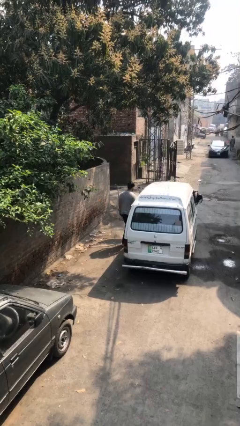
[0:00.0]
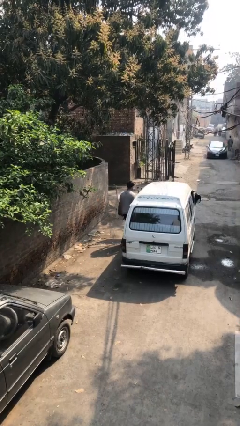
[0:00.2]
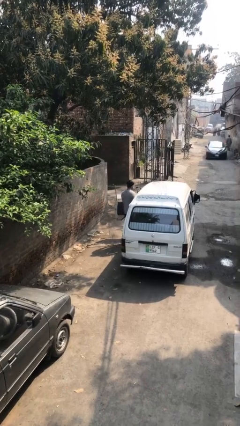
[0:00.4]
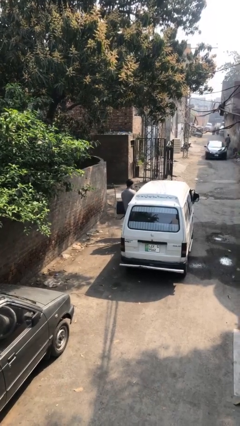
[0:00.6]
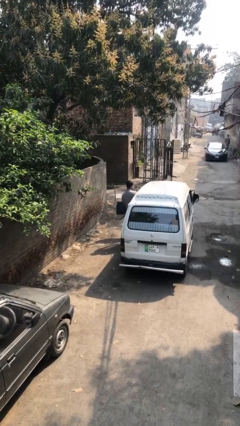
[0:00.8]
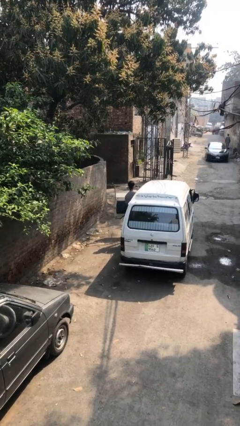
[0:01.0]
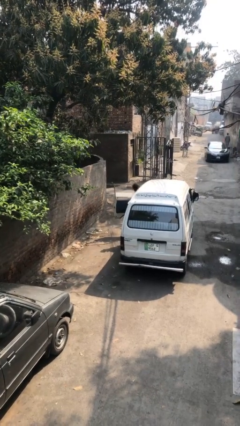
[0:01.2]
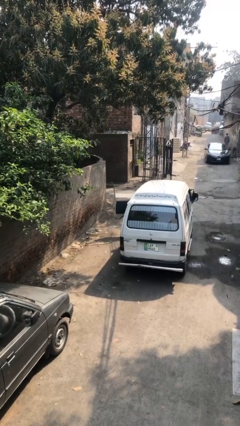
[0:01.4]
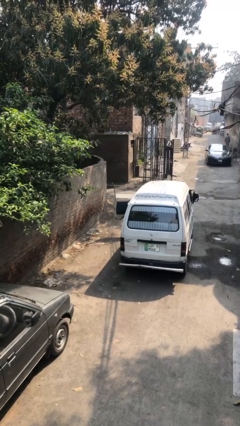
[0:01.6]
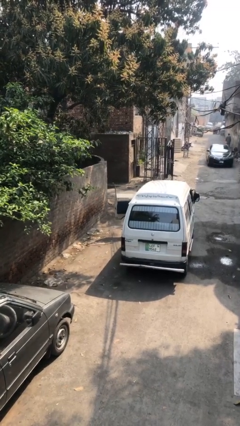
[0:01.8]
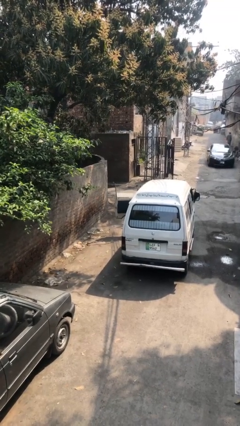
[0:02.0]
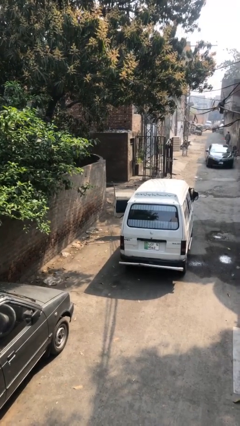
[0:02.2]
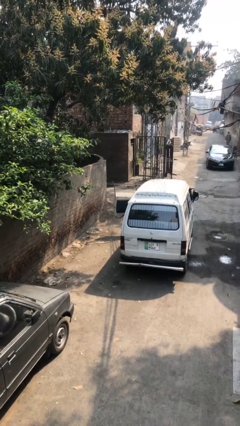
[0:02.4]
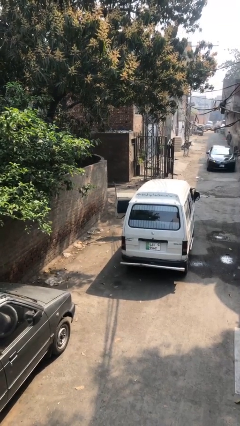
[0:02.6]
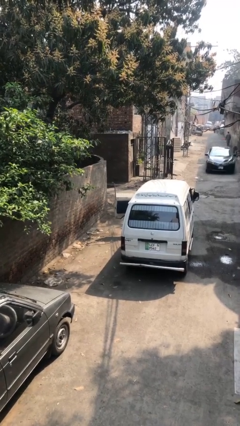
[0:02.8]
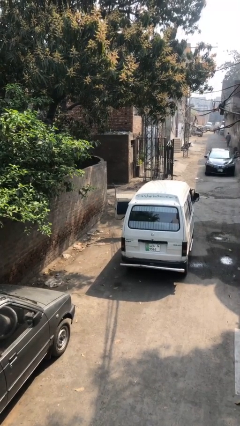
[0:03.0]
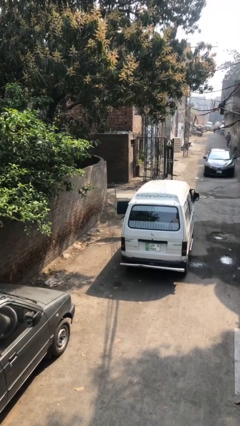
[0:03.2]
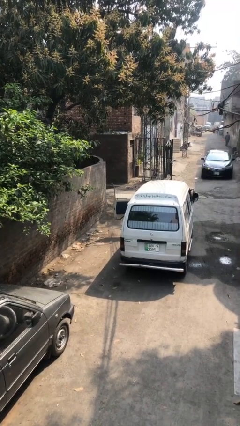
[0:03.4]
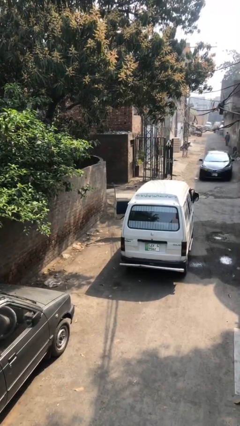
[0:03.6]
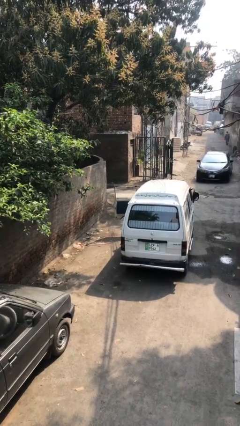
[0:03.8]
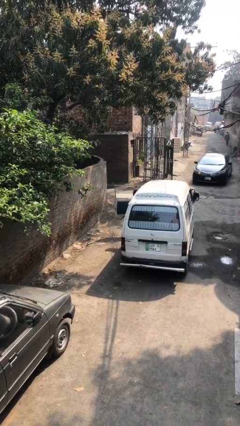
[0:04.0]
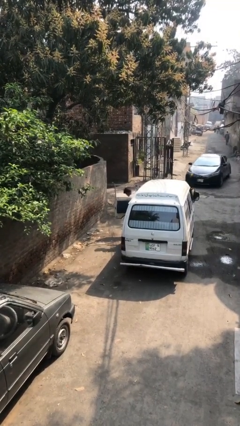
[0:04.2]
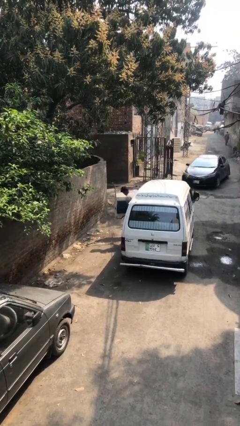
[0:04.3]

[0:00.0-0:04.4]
person enters car

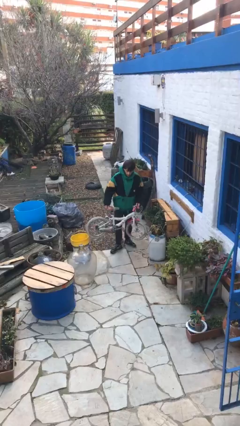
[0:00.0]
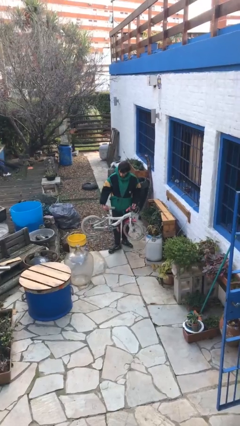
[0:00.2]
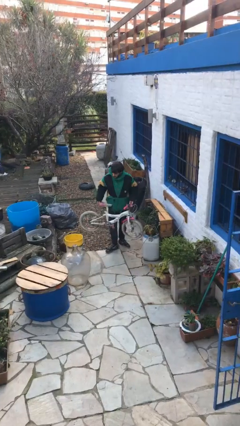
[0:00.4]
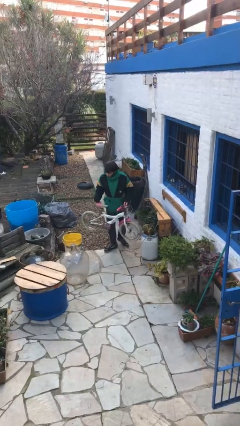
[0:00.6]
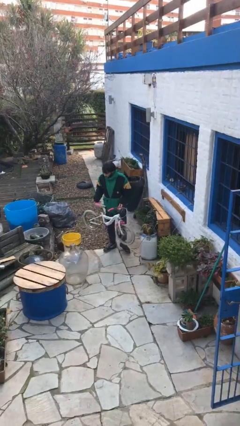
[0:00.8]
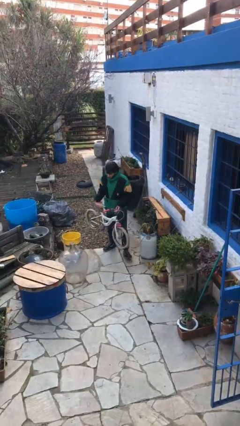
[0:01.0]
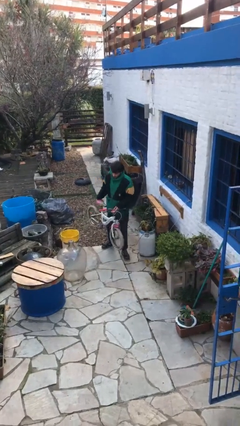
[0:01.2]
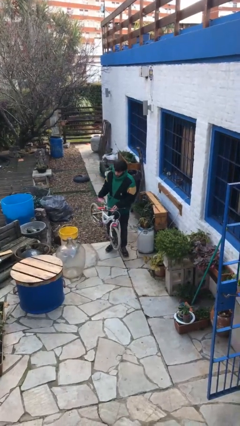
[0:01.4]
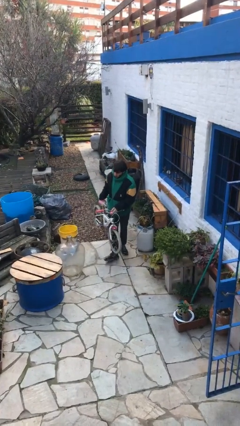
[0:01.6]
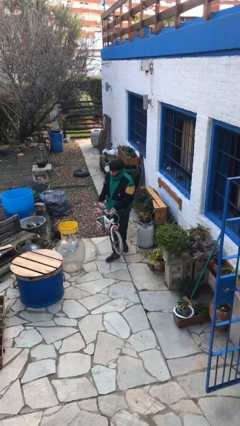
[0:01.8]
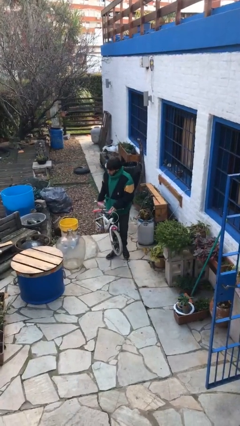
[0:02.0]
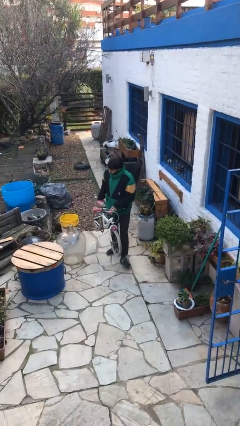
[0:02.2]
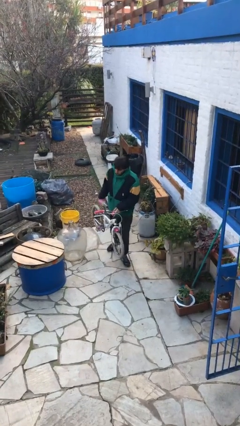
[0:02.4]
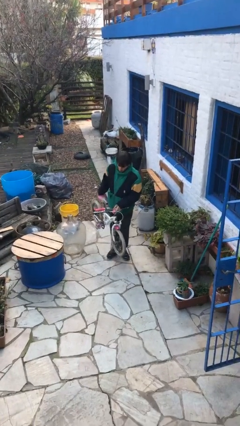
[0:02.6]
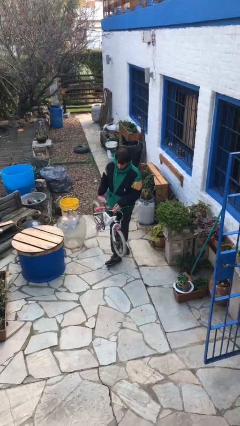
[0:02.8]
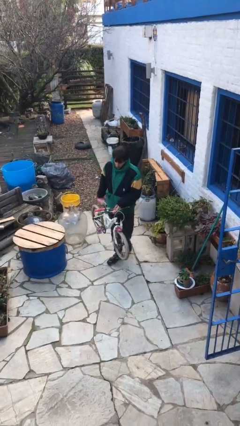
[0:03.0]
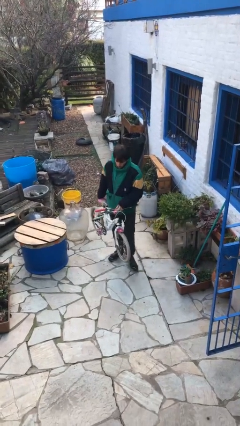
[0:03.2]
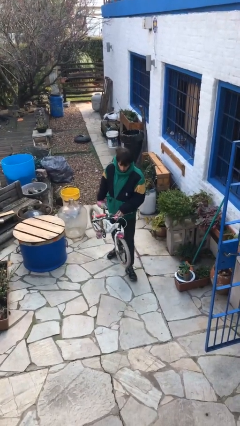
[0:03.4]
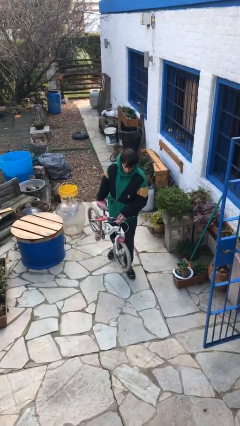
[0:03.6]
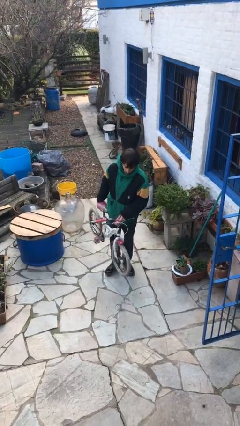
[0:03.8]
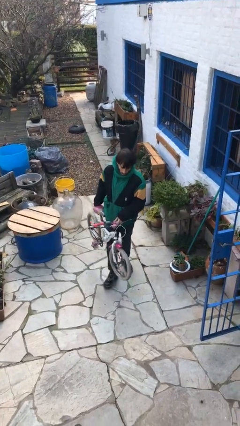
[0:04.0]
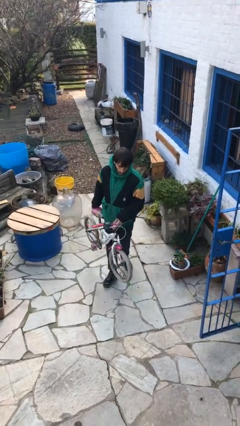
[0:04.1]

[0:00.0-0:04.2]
person carries bicycle

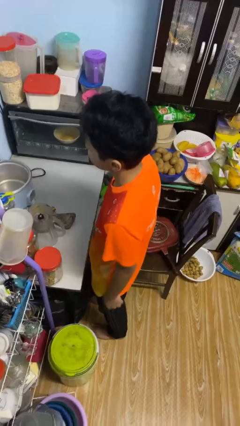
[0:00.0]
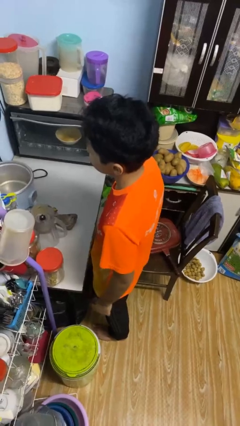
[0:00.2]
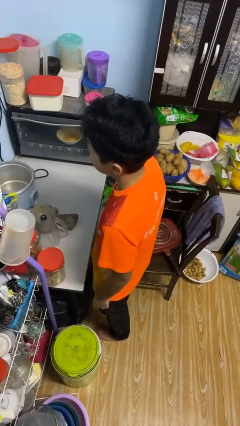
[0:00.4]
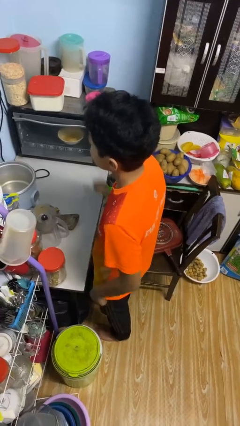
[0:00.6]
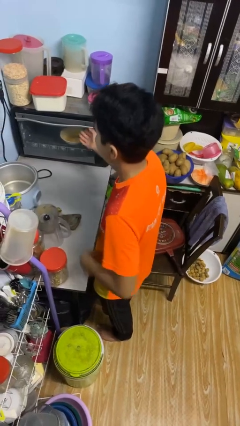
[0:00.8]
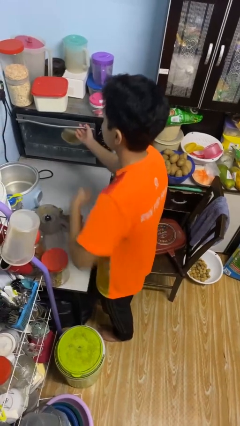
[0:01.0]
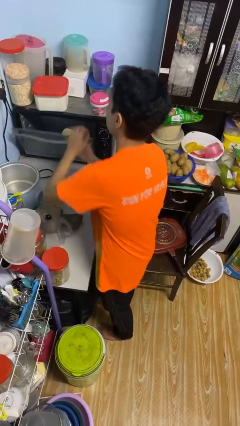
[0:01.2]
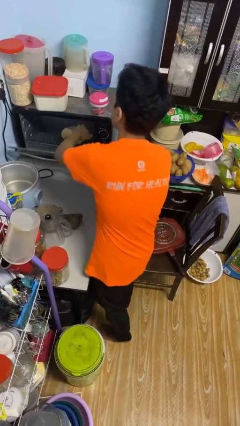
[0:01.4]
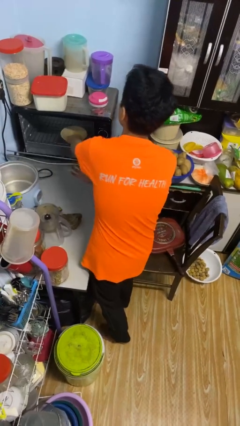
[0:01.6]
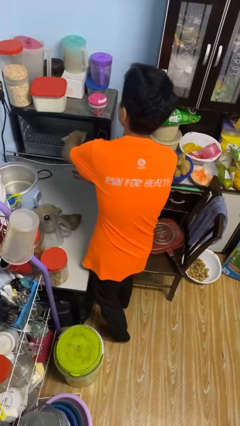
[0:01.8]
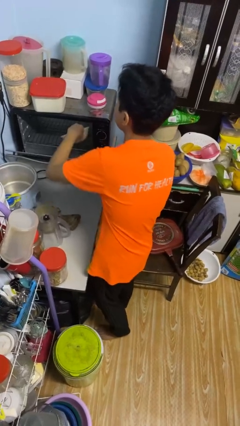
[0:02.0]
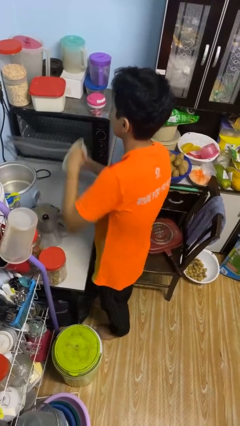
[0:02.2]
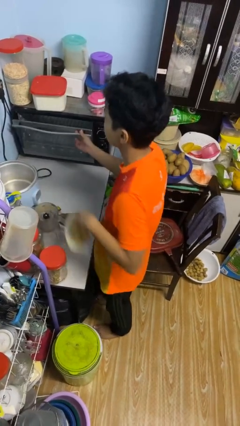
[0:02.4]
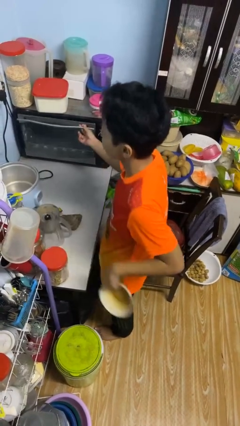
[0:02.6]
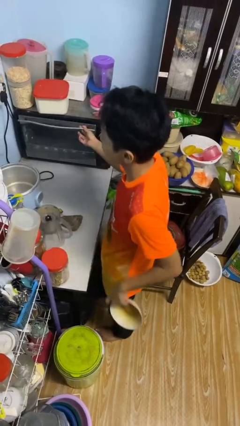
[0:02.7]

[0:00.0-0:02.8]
person takes object from oven

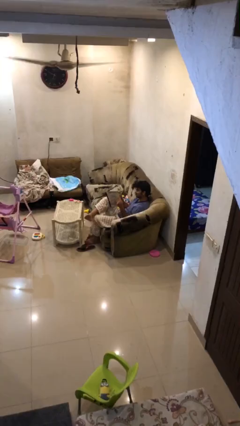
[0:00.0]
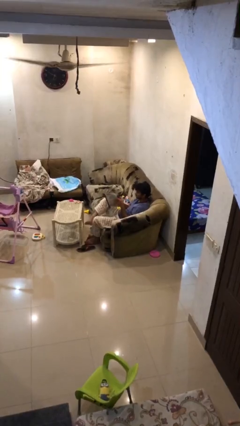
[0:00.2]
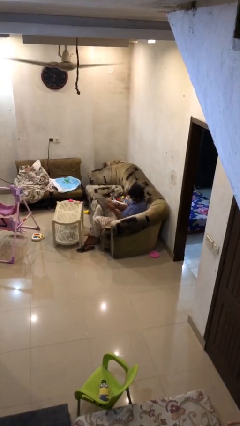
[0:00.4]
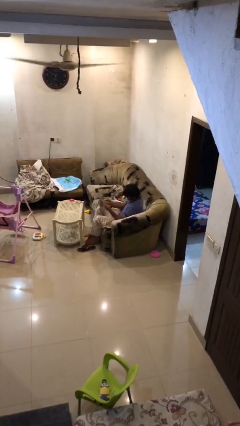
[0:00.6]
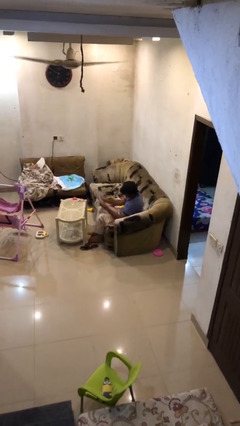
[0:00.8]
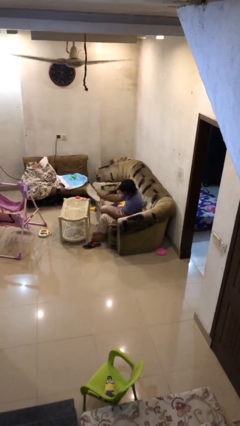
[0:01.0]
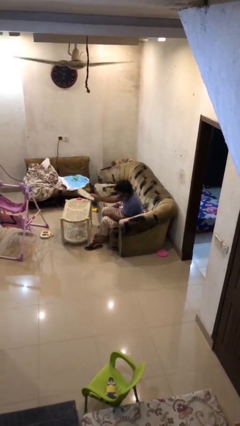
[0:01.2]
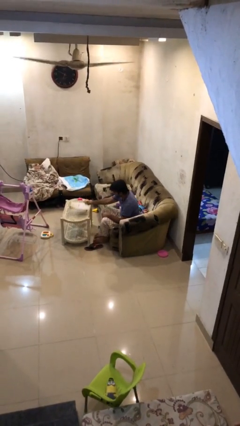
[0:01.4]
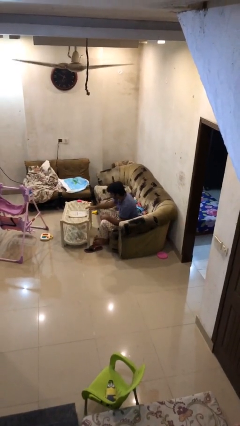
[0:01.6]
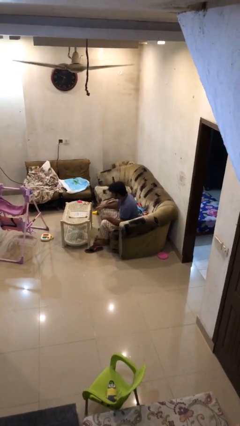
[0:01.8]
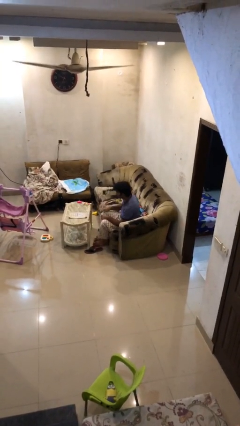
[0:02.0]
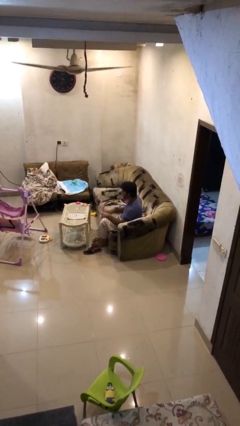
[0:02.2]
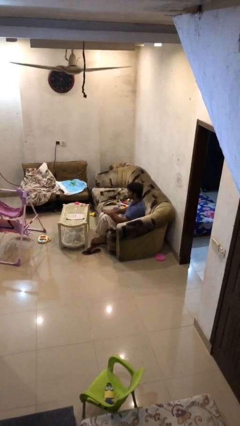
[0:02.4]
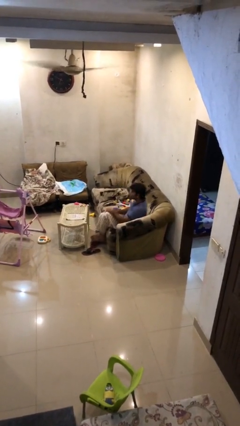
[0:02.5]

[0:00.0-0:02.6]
person puts down object on table

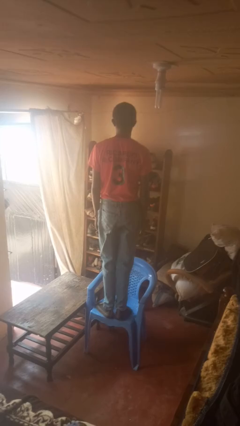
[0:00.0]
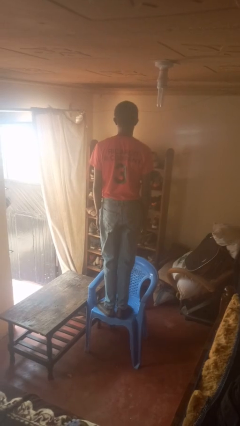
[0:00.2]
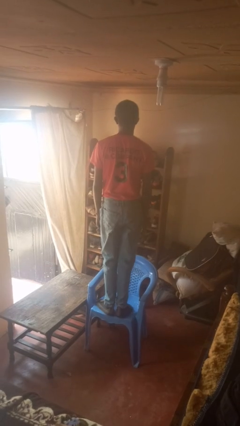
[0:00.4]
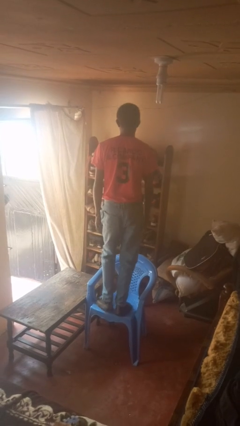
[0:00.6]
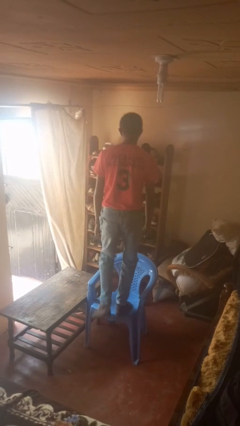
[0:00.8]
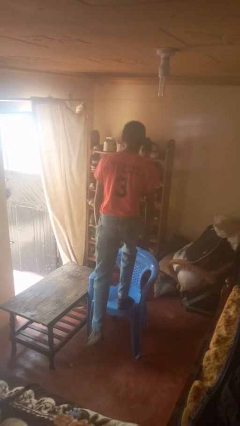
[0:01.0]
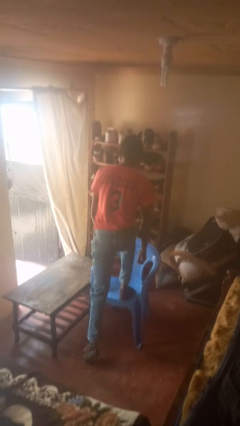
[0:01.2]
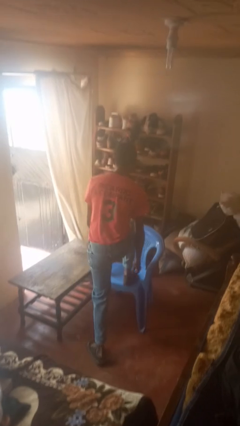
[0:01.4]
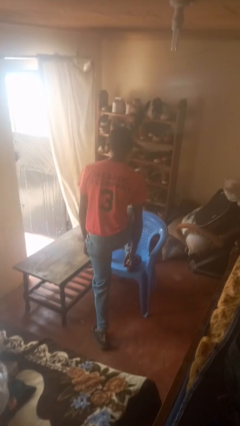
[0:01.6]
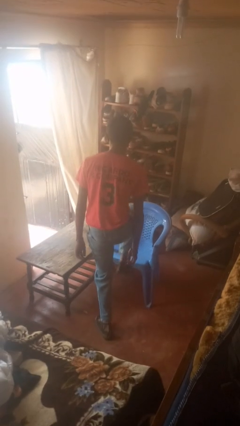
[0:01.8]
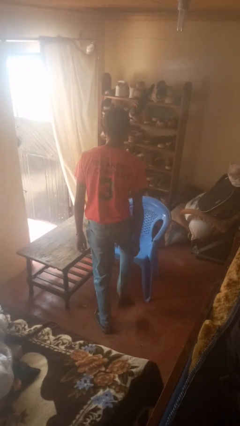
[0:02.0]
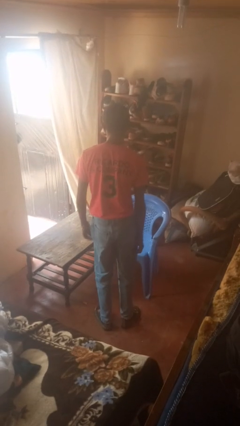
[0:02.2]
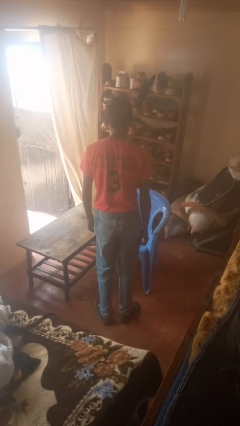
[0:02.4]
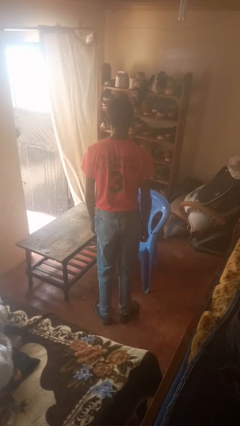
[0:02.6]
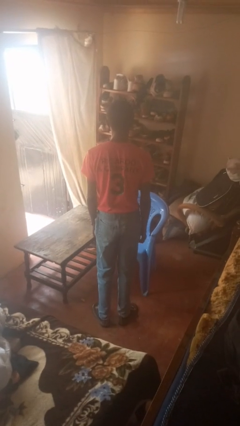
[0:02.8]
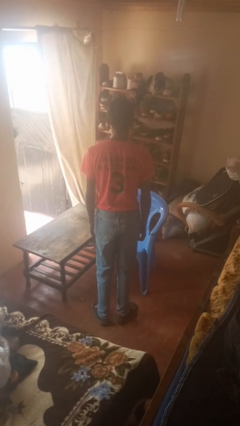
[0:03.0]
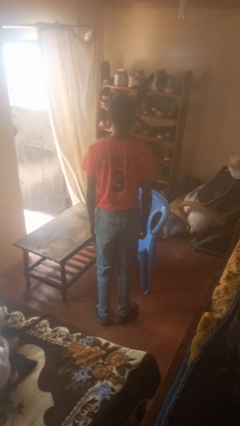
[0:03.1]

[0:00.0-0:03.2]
person climbs off chair

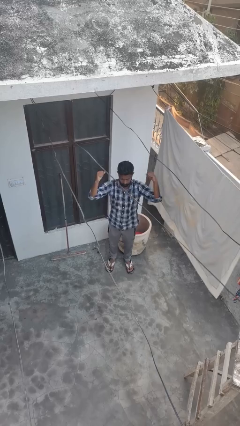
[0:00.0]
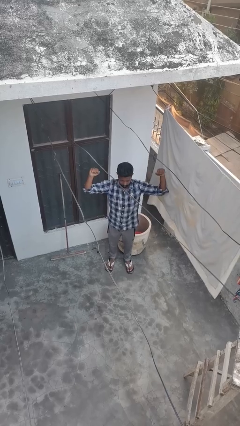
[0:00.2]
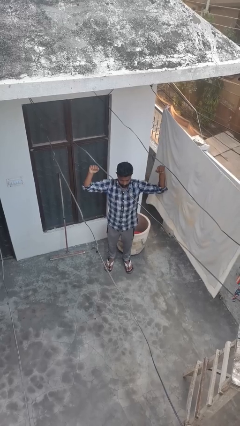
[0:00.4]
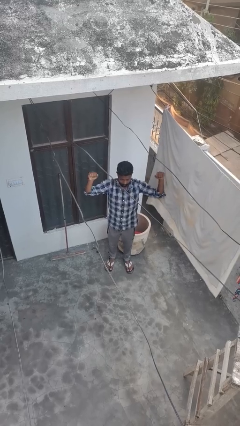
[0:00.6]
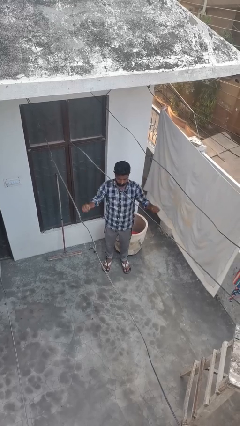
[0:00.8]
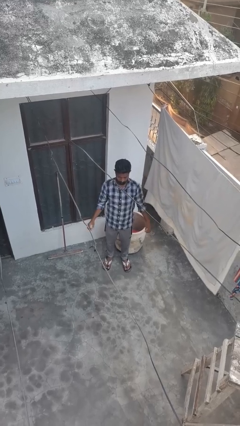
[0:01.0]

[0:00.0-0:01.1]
person gestures zoom out
